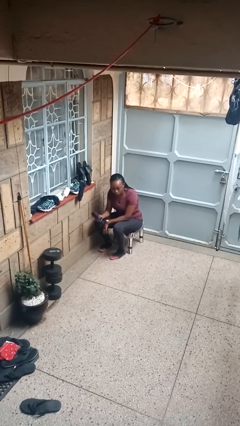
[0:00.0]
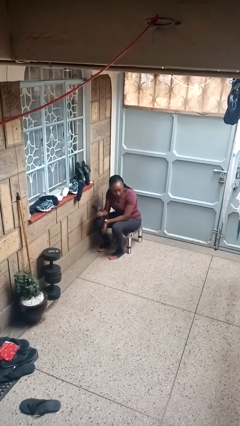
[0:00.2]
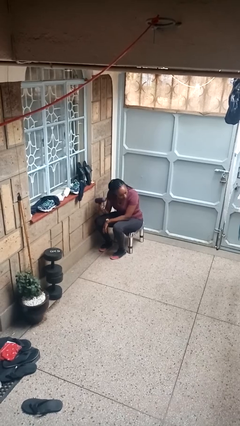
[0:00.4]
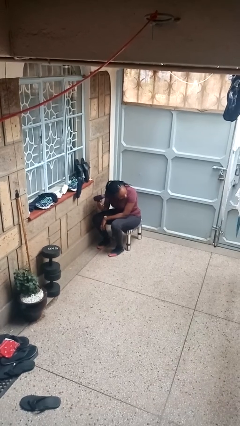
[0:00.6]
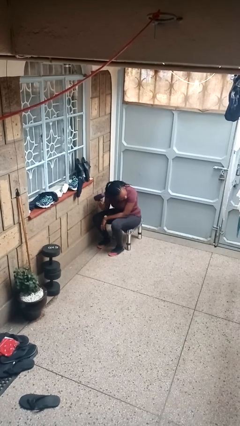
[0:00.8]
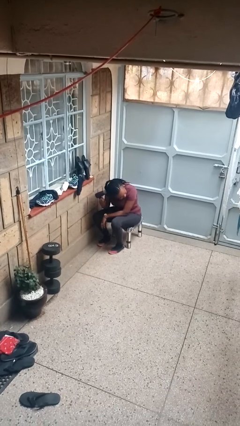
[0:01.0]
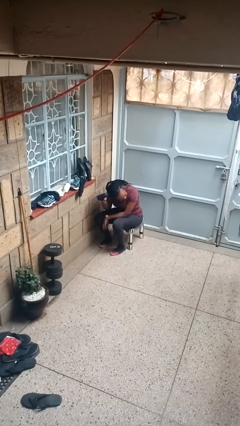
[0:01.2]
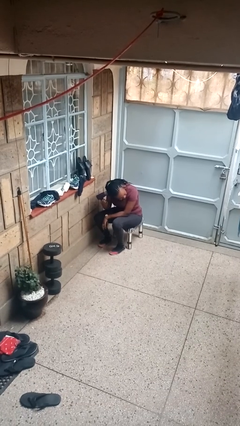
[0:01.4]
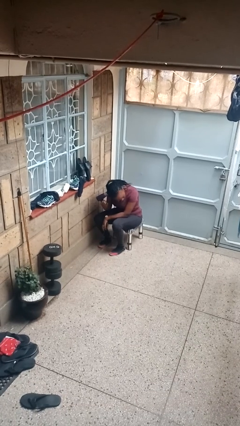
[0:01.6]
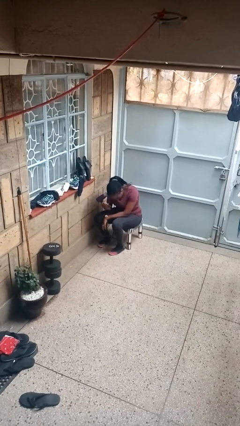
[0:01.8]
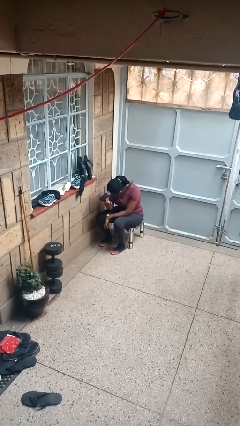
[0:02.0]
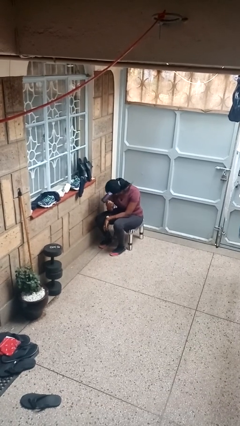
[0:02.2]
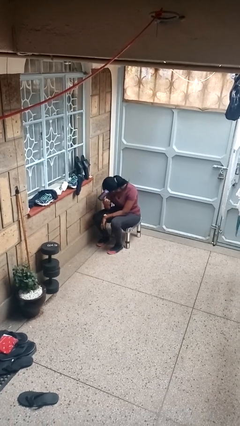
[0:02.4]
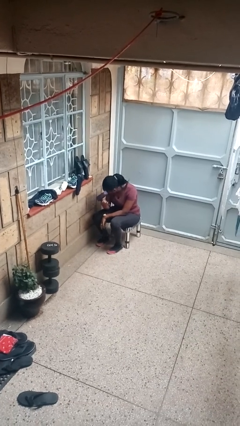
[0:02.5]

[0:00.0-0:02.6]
person dries hair with hairdryer

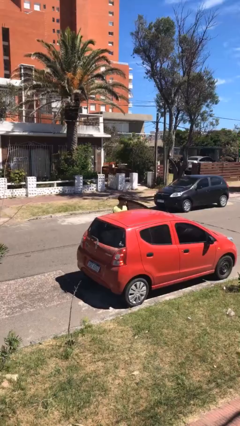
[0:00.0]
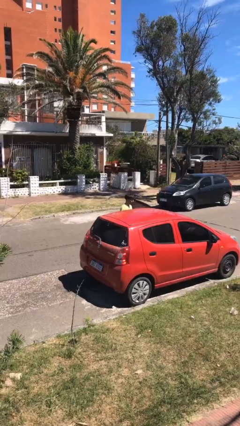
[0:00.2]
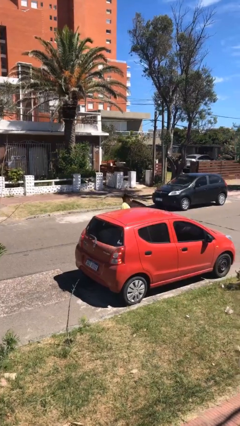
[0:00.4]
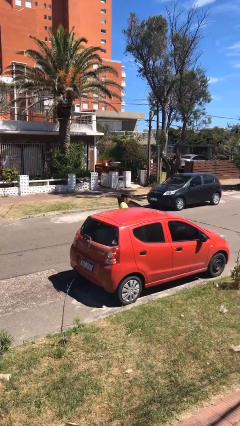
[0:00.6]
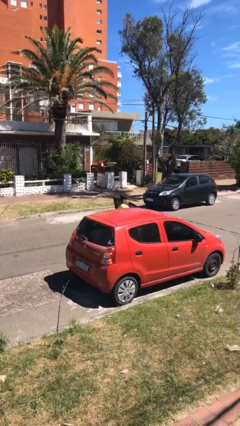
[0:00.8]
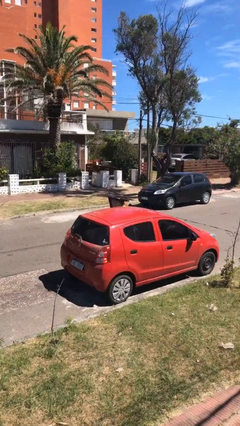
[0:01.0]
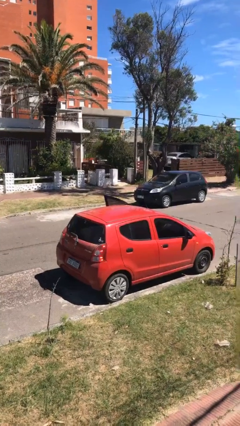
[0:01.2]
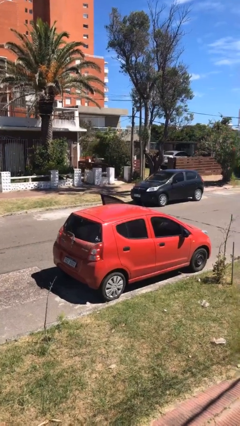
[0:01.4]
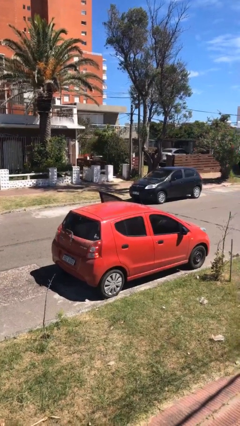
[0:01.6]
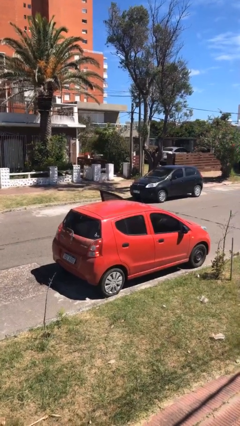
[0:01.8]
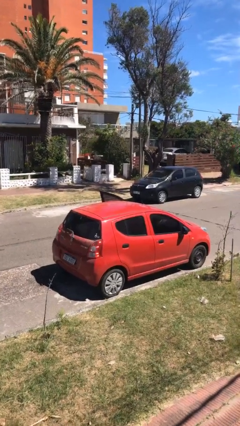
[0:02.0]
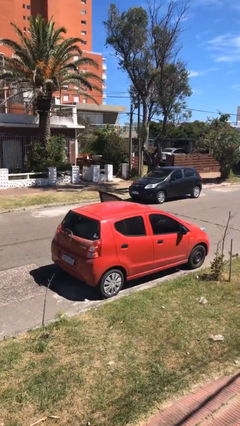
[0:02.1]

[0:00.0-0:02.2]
person enters car

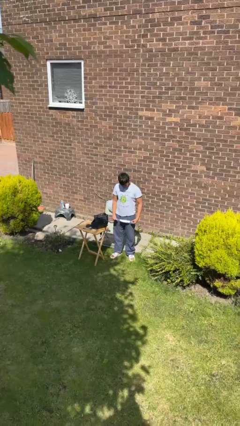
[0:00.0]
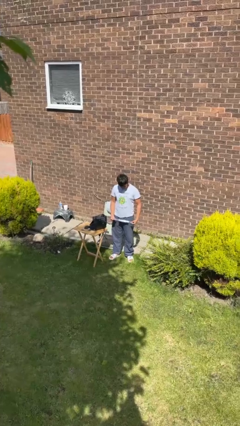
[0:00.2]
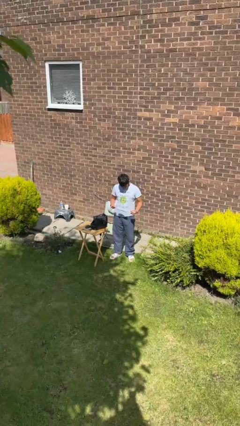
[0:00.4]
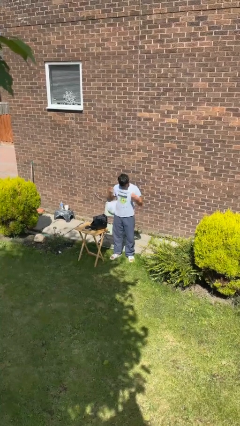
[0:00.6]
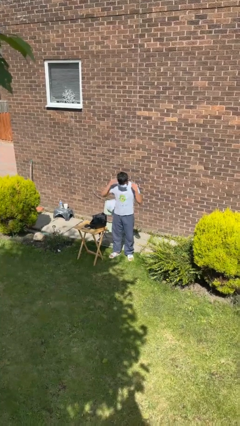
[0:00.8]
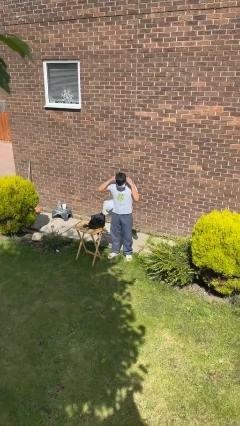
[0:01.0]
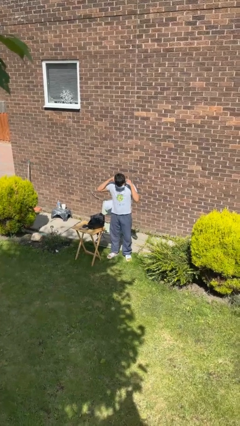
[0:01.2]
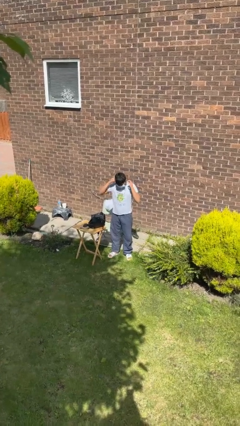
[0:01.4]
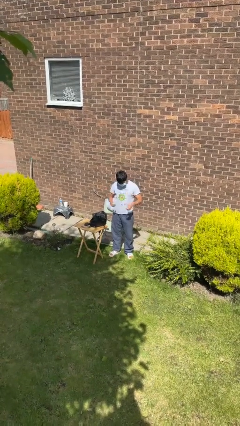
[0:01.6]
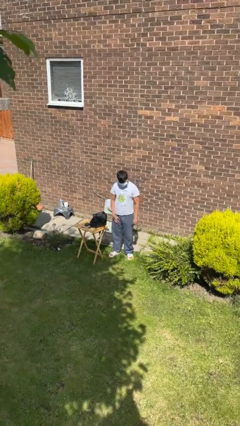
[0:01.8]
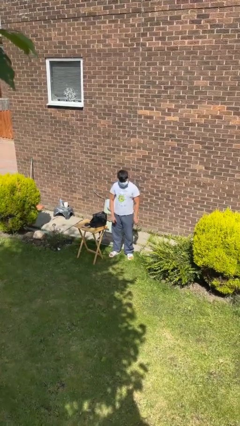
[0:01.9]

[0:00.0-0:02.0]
person puts on facemask

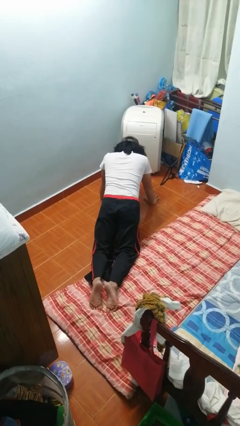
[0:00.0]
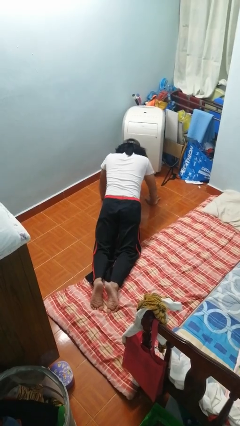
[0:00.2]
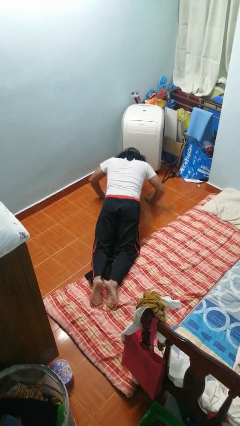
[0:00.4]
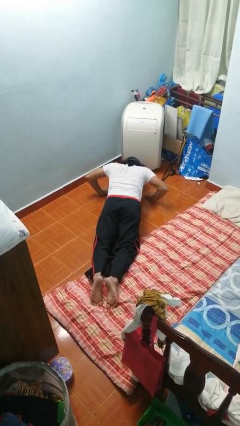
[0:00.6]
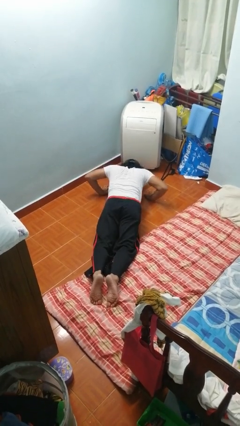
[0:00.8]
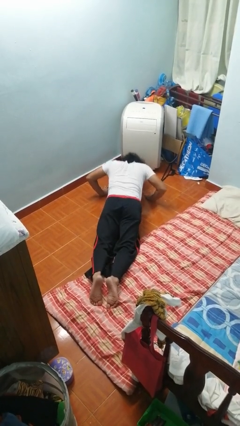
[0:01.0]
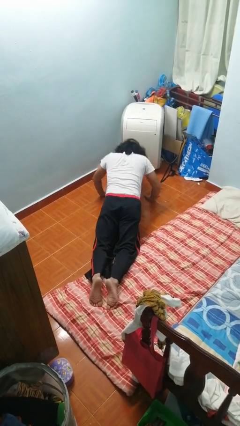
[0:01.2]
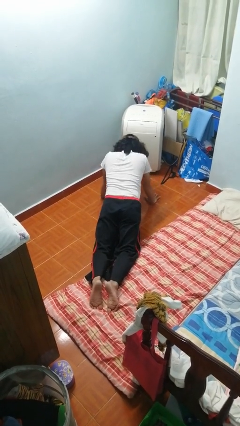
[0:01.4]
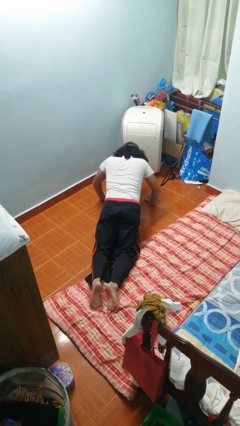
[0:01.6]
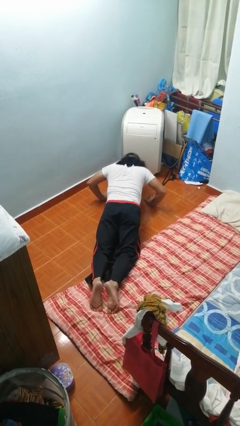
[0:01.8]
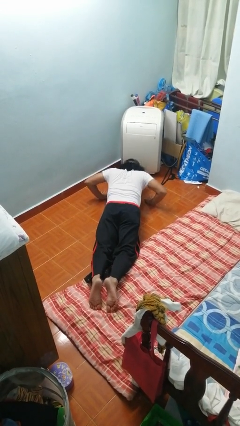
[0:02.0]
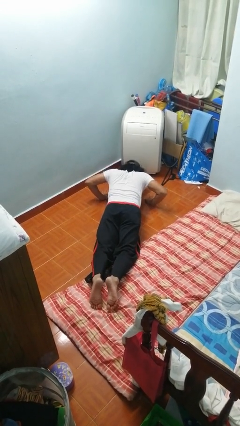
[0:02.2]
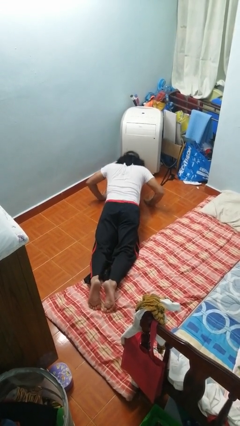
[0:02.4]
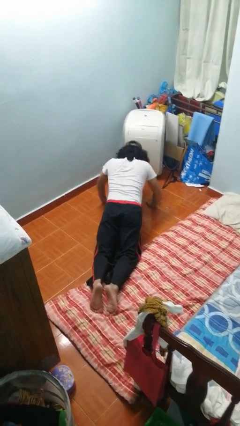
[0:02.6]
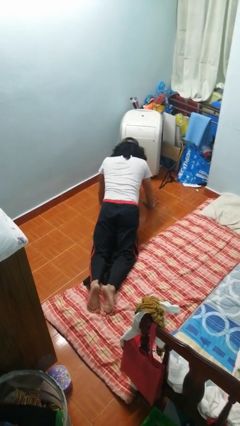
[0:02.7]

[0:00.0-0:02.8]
person exercises with pushup

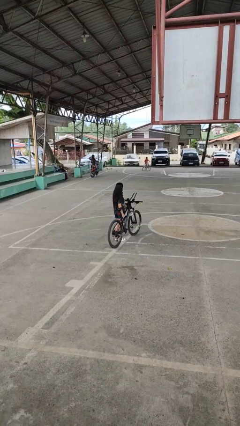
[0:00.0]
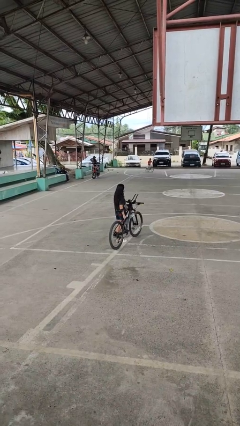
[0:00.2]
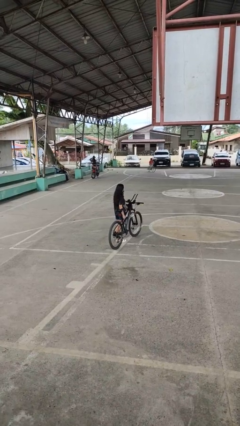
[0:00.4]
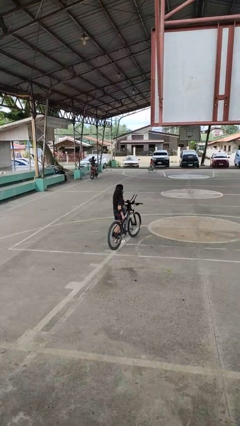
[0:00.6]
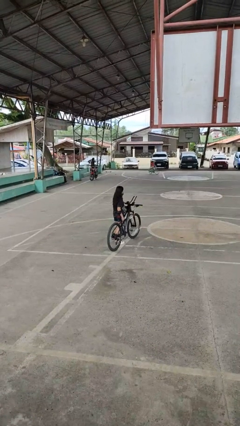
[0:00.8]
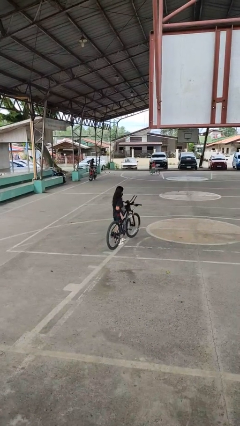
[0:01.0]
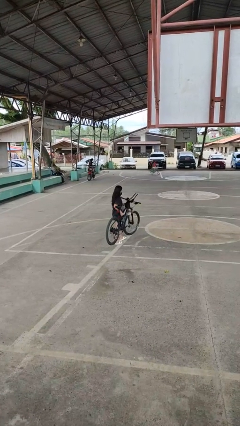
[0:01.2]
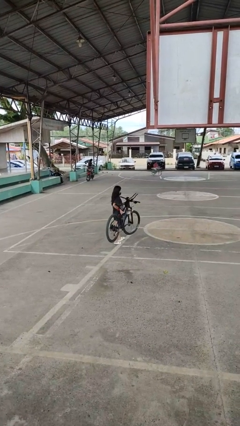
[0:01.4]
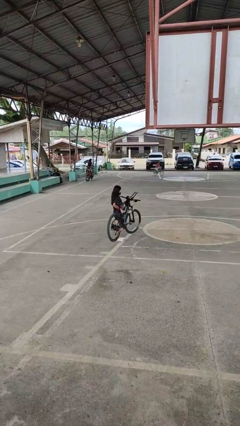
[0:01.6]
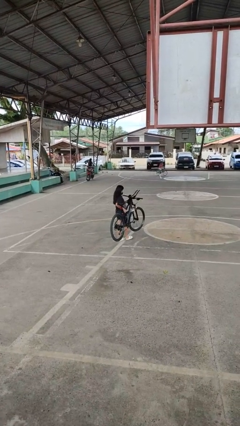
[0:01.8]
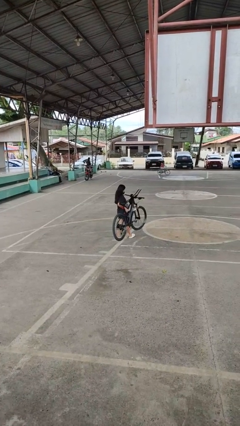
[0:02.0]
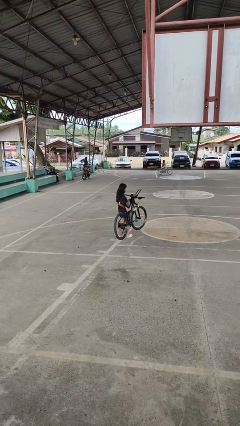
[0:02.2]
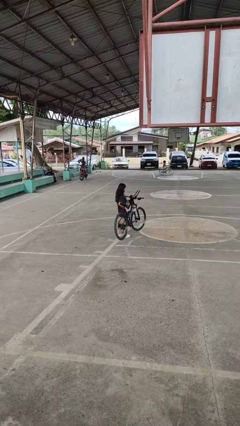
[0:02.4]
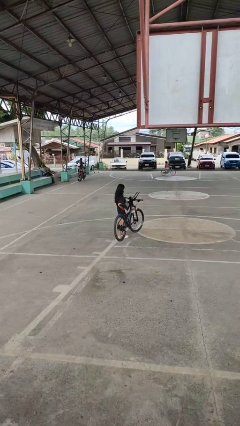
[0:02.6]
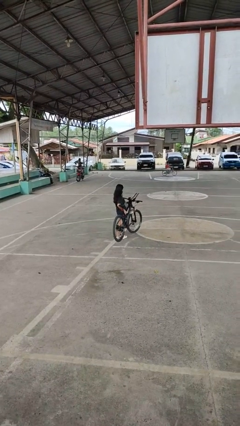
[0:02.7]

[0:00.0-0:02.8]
person carries bicycle

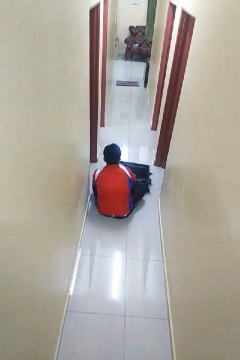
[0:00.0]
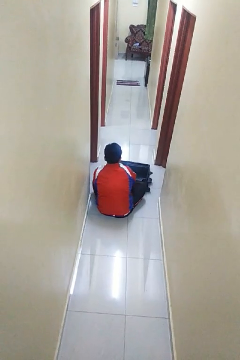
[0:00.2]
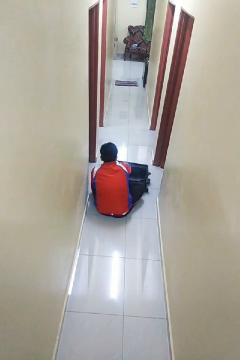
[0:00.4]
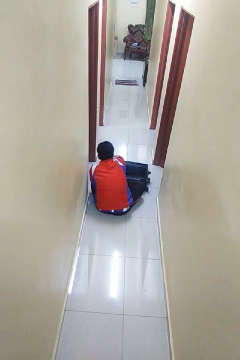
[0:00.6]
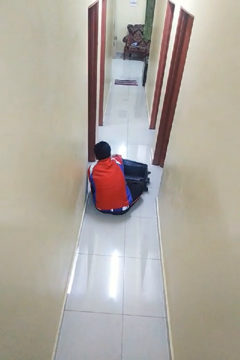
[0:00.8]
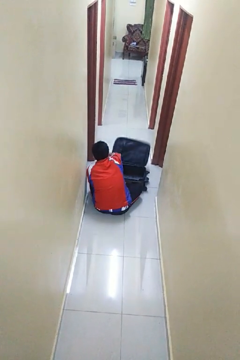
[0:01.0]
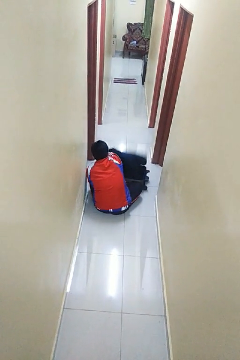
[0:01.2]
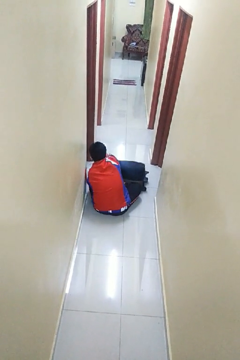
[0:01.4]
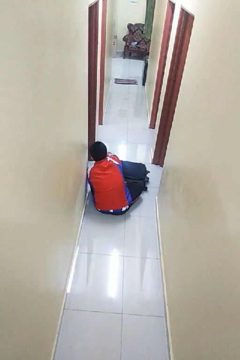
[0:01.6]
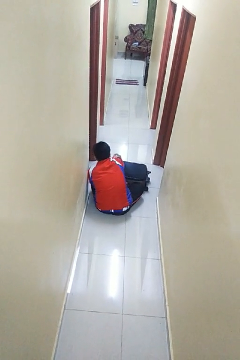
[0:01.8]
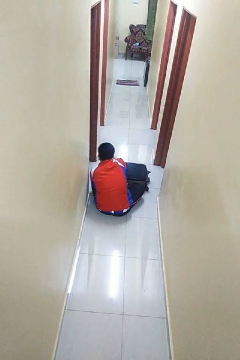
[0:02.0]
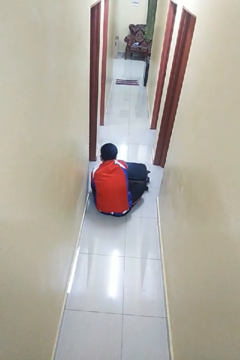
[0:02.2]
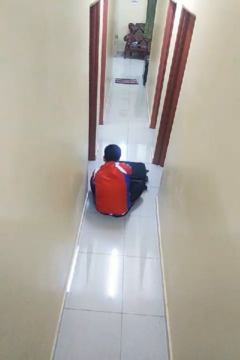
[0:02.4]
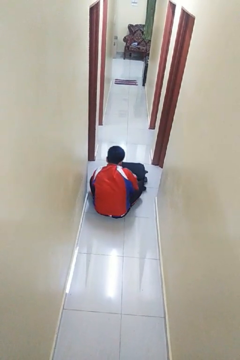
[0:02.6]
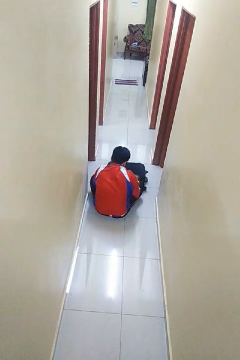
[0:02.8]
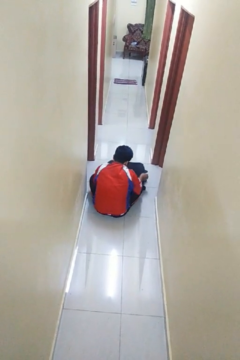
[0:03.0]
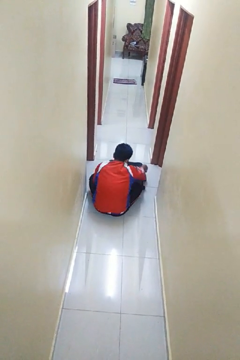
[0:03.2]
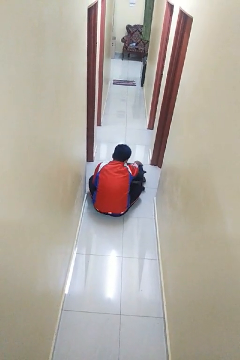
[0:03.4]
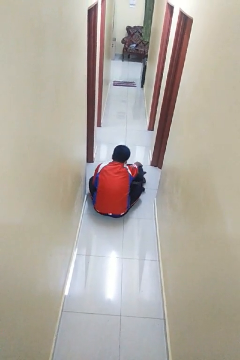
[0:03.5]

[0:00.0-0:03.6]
person closes suitcase

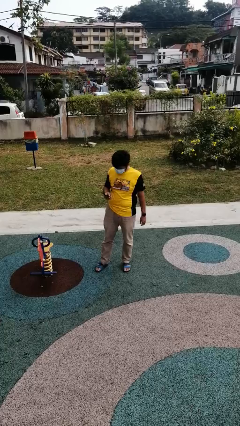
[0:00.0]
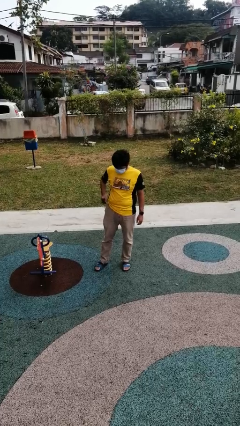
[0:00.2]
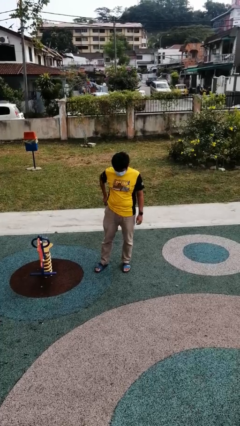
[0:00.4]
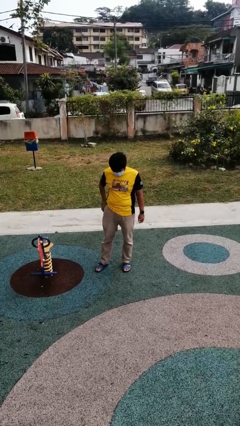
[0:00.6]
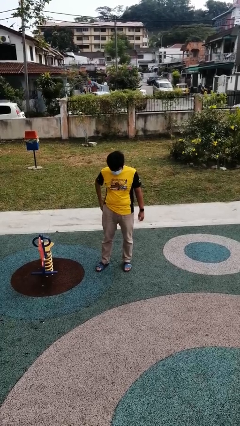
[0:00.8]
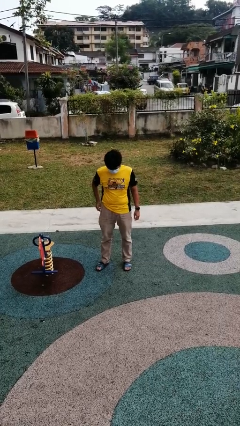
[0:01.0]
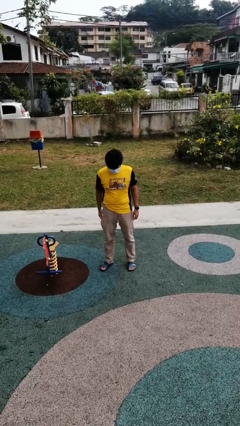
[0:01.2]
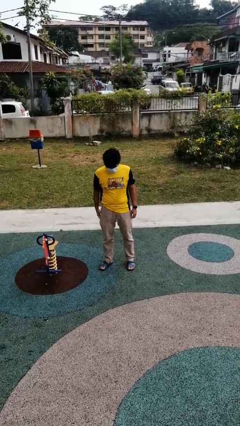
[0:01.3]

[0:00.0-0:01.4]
person puts phone into pocket

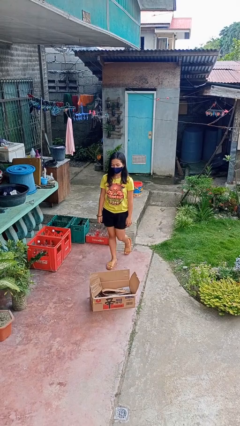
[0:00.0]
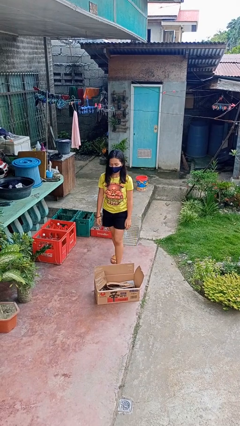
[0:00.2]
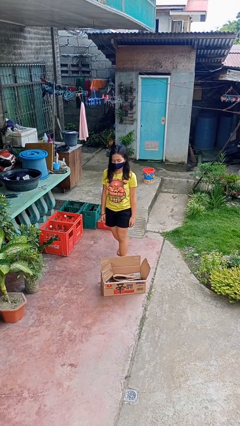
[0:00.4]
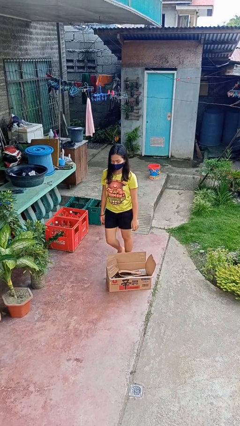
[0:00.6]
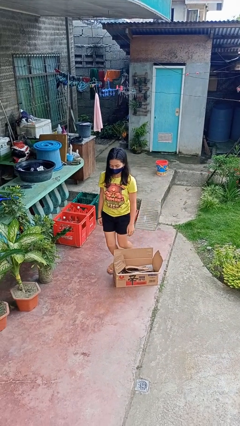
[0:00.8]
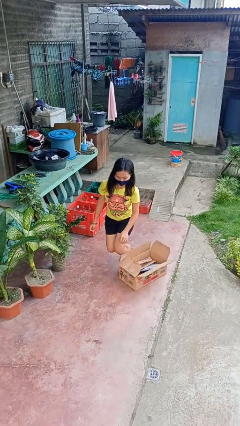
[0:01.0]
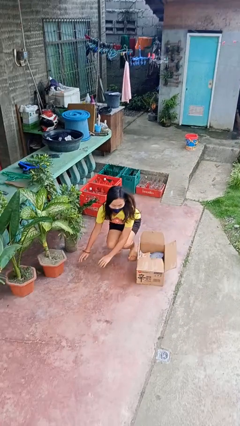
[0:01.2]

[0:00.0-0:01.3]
person trips on object on floor
